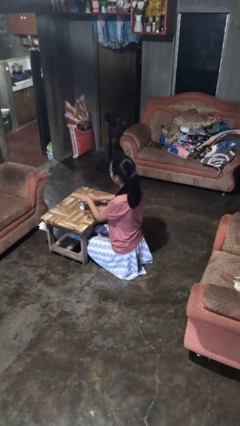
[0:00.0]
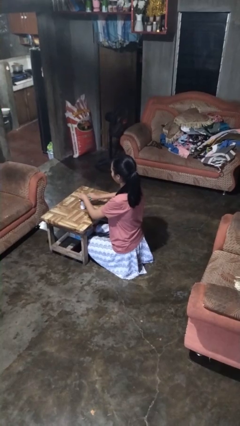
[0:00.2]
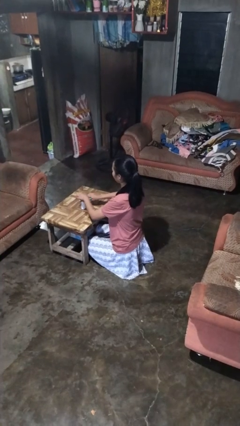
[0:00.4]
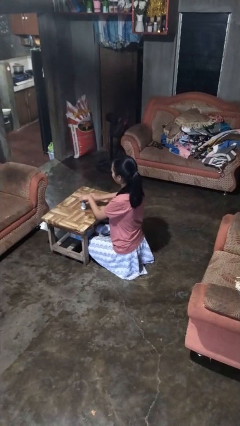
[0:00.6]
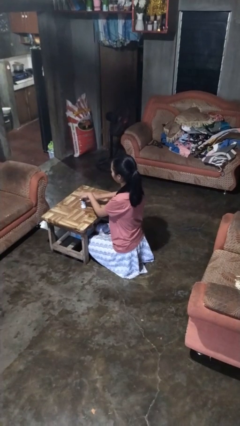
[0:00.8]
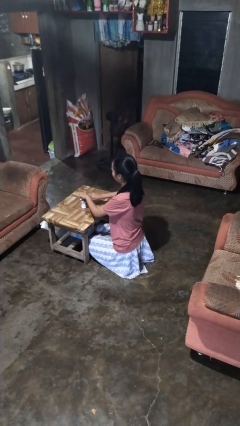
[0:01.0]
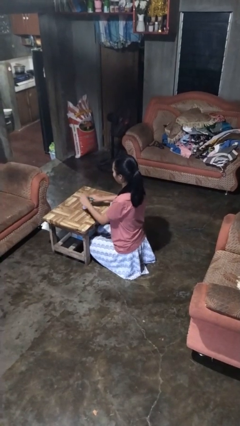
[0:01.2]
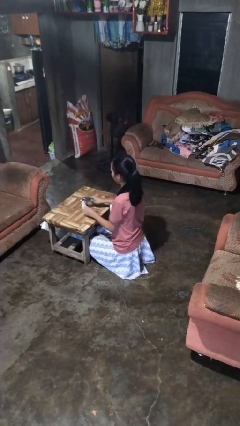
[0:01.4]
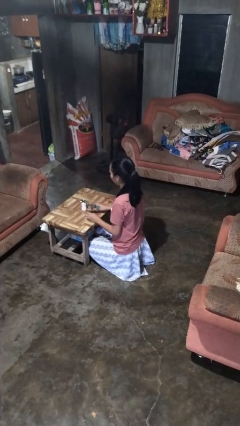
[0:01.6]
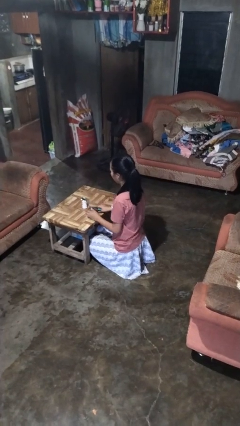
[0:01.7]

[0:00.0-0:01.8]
person opens can with can opener

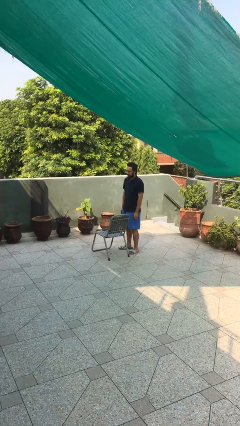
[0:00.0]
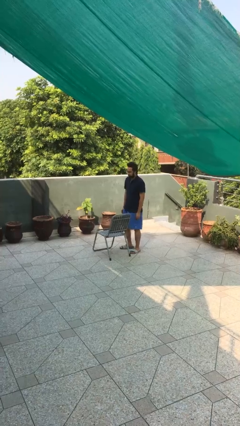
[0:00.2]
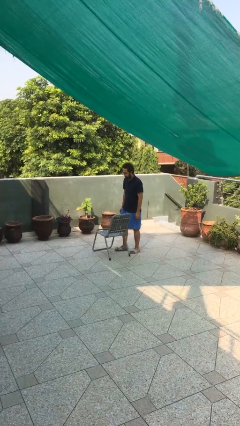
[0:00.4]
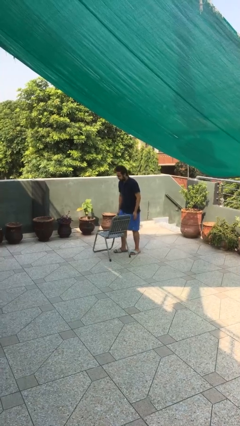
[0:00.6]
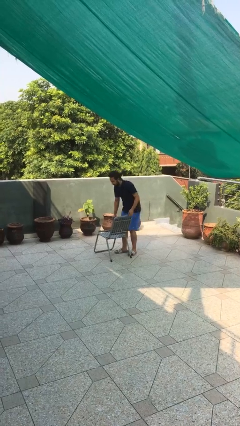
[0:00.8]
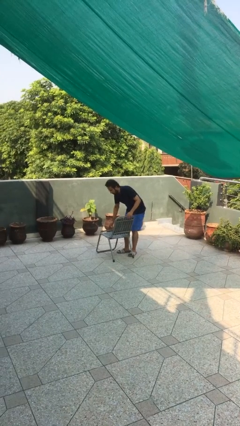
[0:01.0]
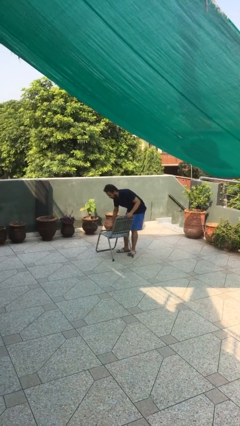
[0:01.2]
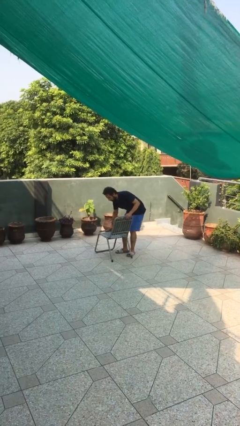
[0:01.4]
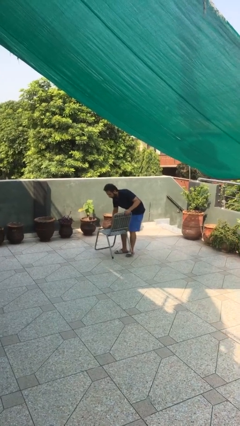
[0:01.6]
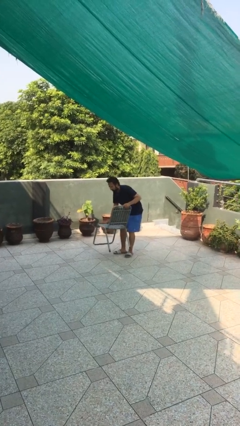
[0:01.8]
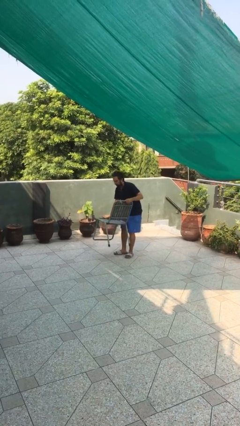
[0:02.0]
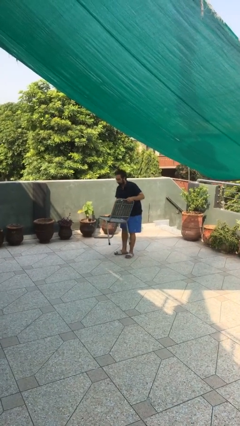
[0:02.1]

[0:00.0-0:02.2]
person picks up object from floor

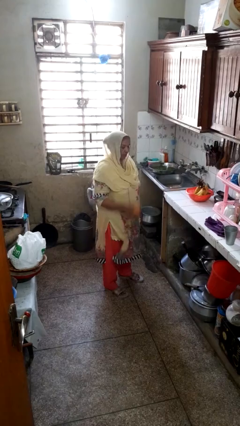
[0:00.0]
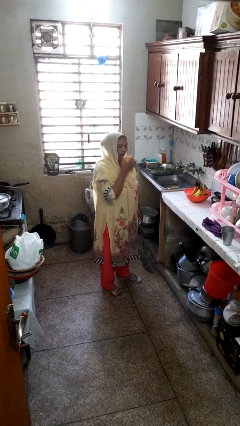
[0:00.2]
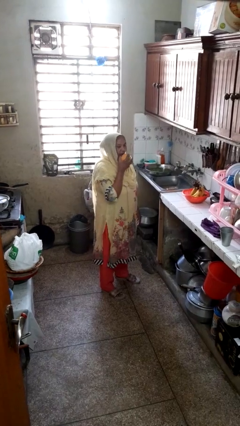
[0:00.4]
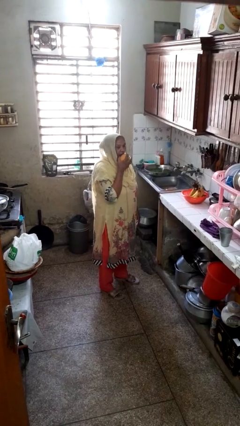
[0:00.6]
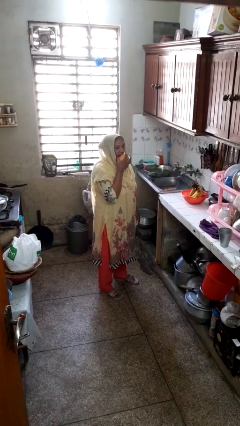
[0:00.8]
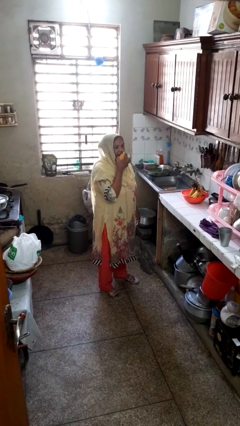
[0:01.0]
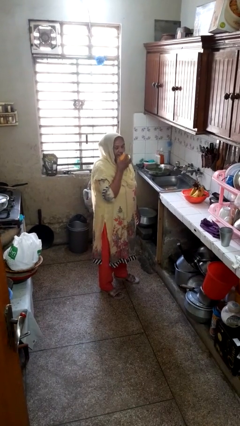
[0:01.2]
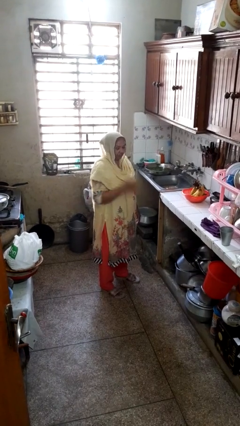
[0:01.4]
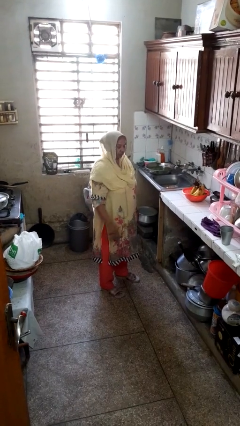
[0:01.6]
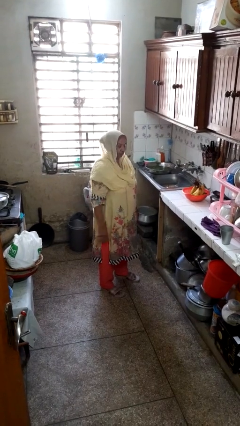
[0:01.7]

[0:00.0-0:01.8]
person eats apple

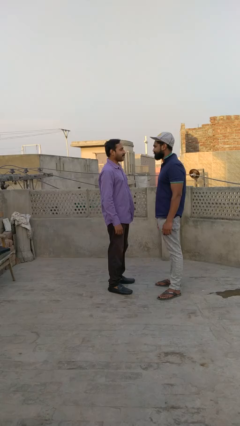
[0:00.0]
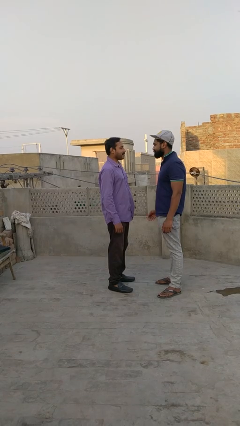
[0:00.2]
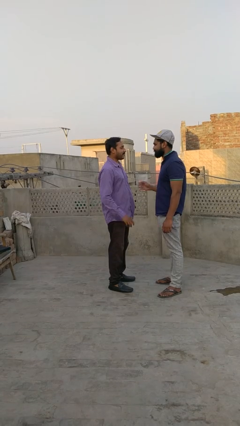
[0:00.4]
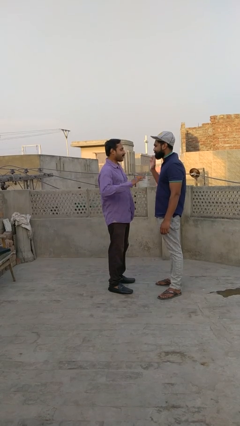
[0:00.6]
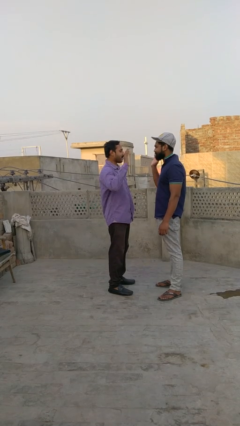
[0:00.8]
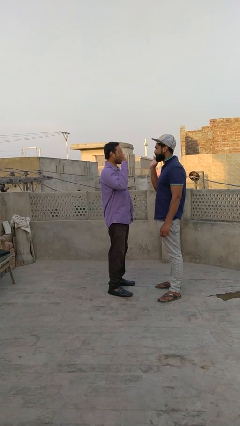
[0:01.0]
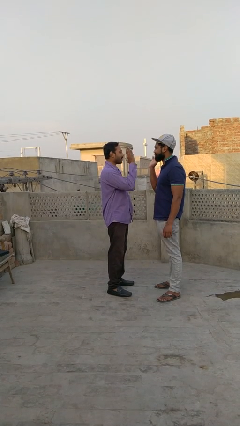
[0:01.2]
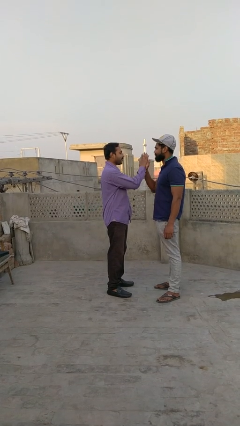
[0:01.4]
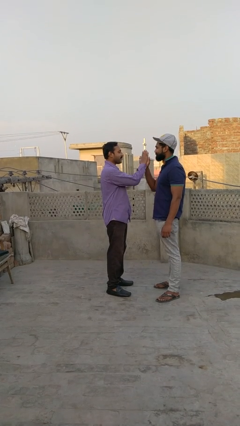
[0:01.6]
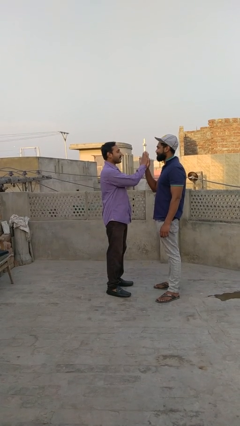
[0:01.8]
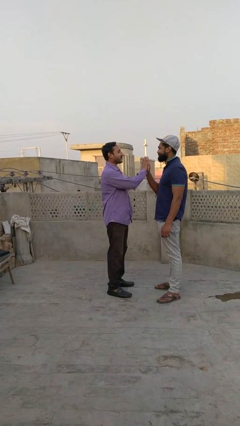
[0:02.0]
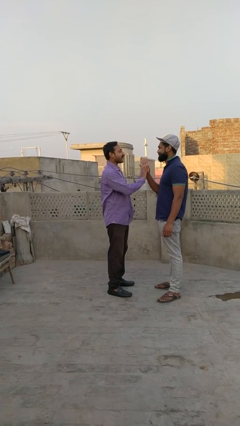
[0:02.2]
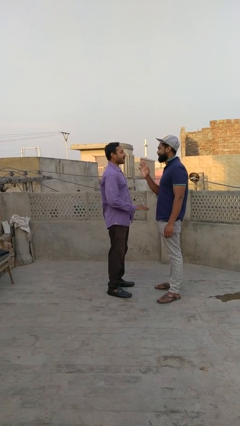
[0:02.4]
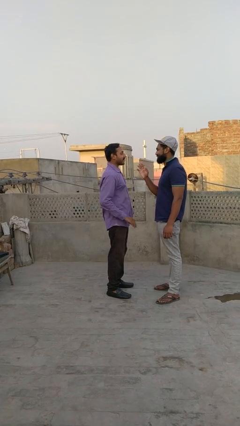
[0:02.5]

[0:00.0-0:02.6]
person highfives hand

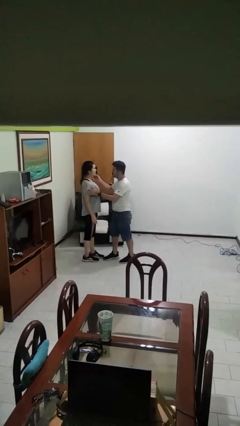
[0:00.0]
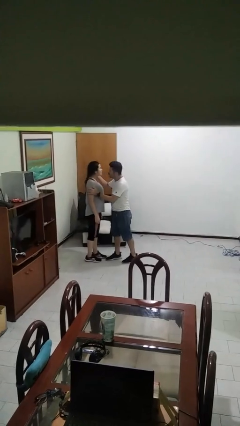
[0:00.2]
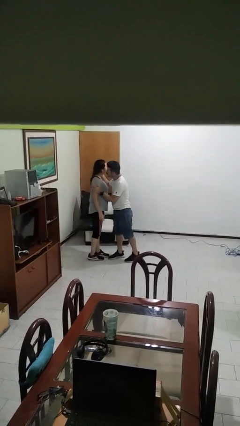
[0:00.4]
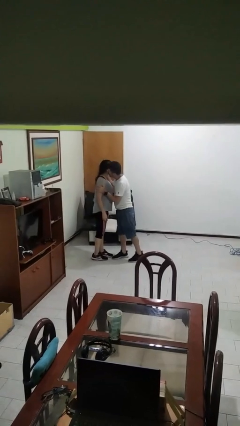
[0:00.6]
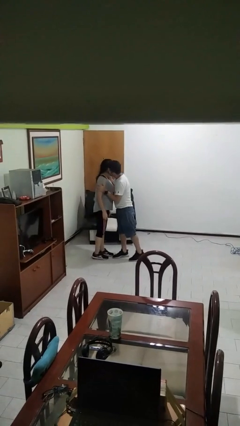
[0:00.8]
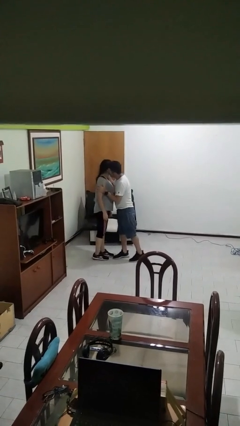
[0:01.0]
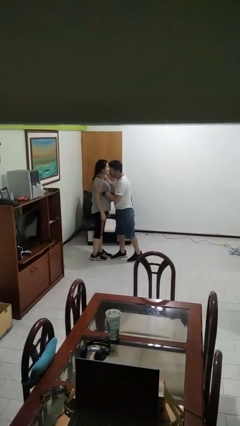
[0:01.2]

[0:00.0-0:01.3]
person kisses cheek of person

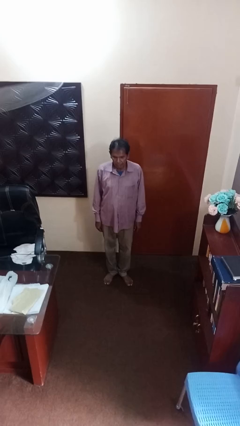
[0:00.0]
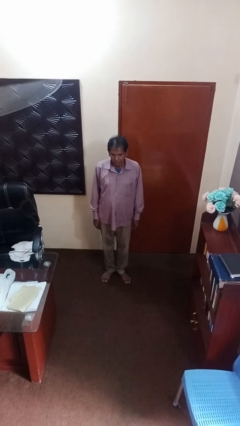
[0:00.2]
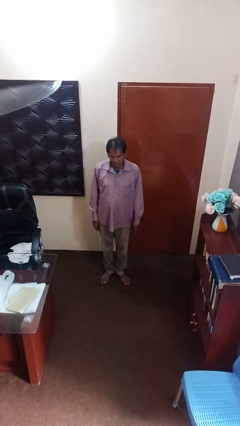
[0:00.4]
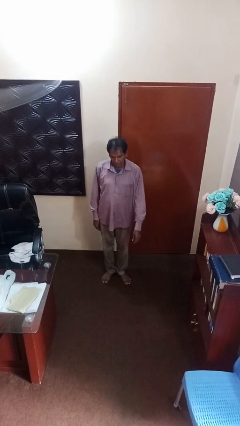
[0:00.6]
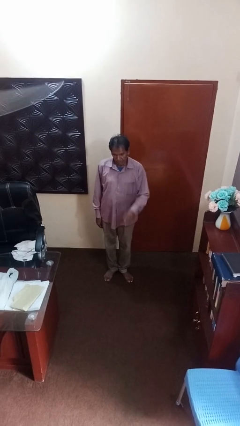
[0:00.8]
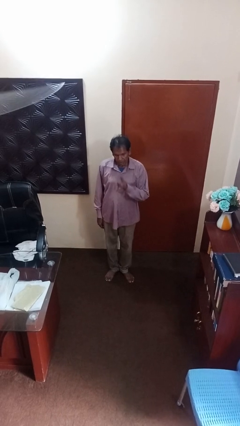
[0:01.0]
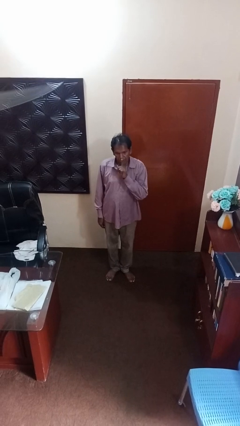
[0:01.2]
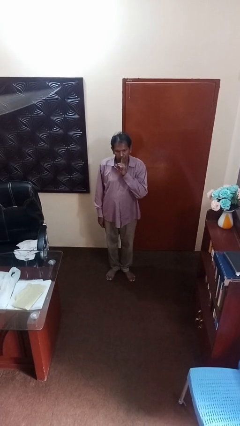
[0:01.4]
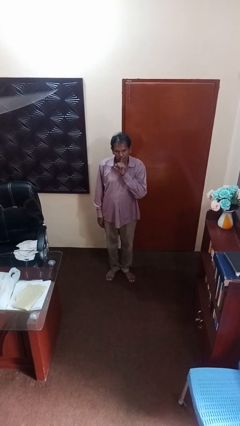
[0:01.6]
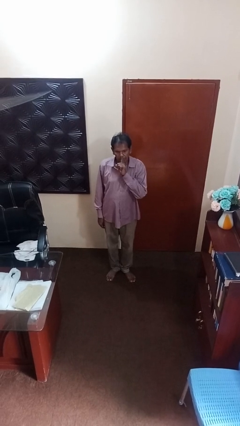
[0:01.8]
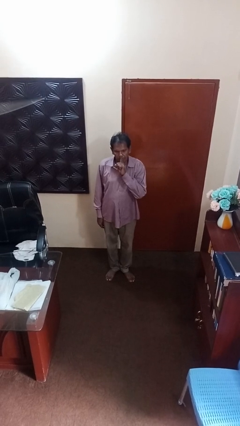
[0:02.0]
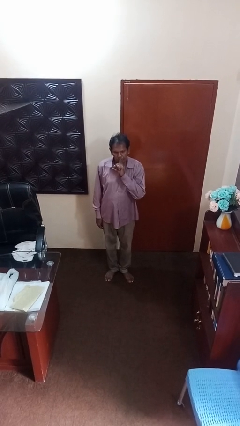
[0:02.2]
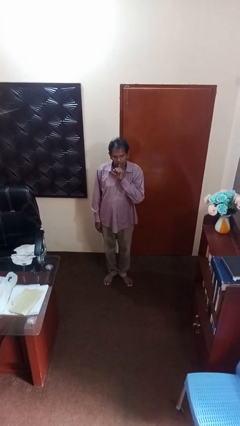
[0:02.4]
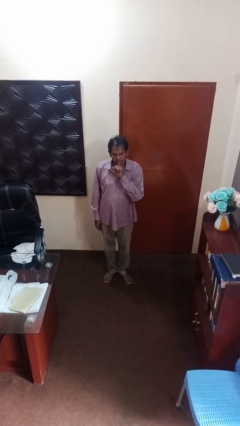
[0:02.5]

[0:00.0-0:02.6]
person gestures blow kiss

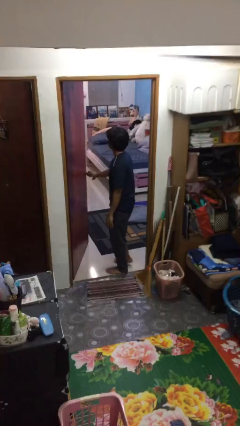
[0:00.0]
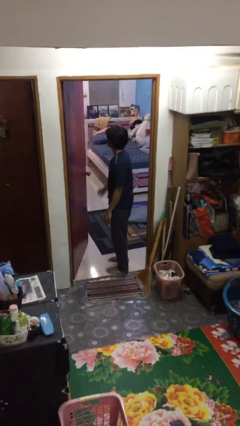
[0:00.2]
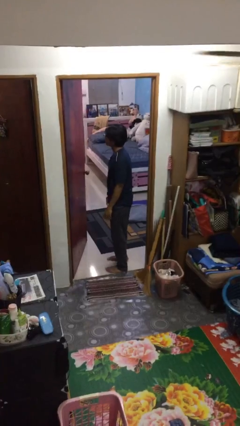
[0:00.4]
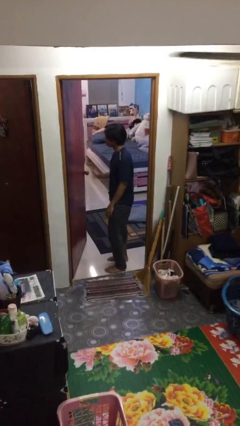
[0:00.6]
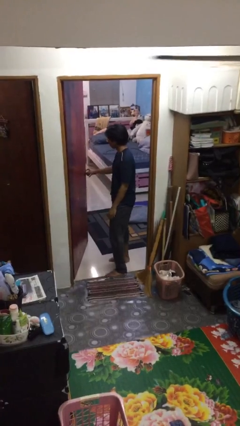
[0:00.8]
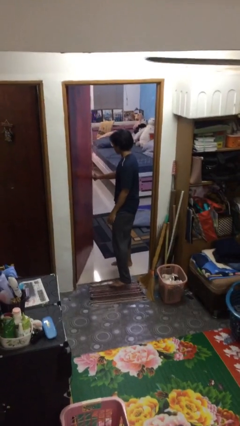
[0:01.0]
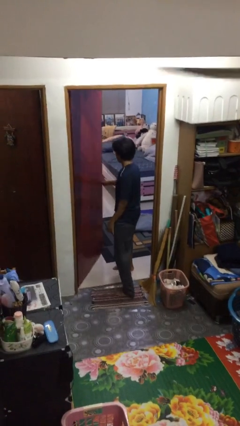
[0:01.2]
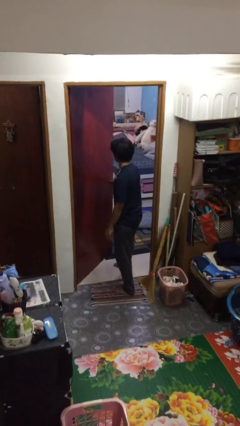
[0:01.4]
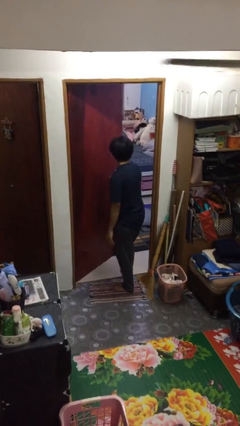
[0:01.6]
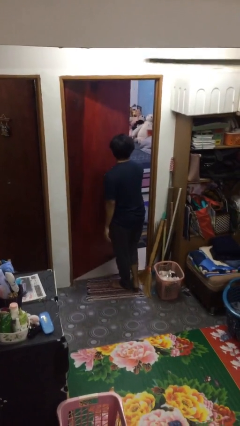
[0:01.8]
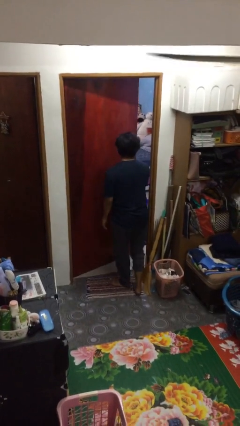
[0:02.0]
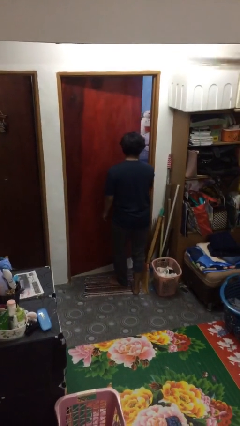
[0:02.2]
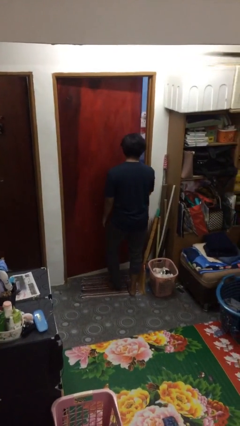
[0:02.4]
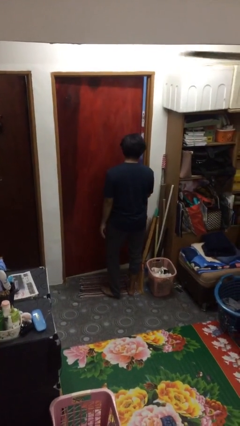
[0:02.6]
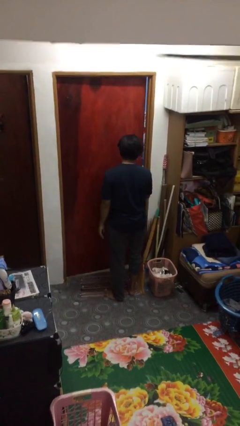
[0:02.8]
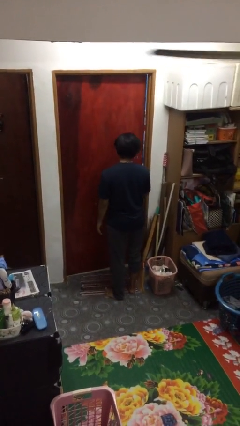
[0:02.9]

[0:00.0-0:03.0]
person closes facility door

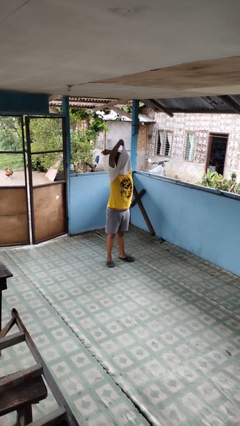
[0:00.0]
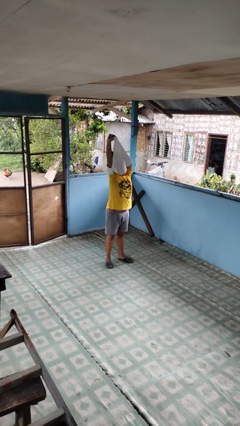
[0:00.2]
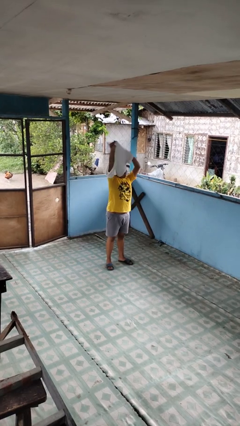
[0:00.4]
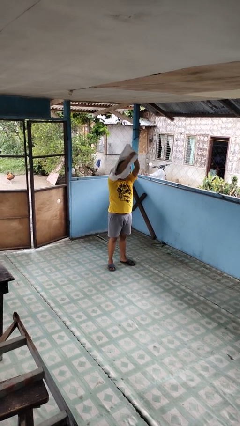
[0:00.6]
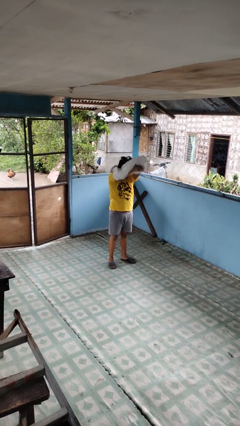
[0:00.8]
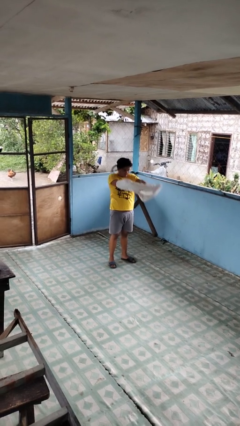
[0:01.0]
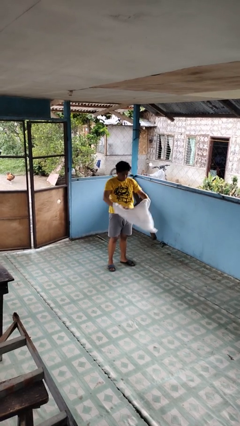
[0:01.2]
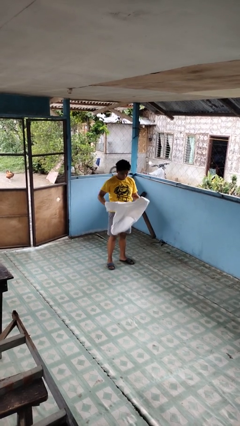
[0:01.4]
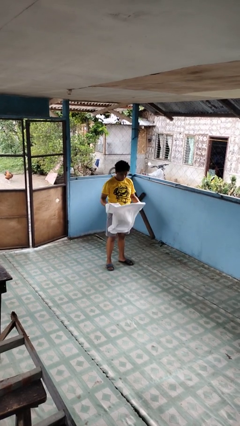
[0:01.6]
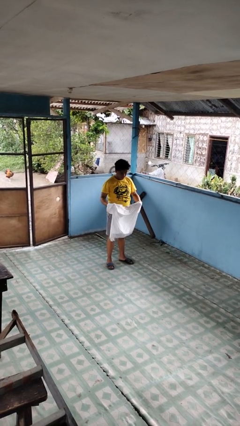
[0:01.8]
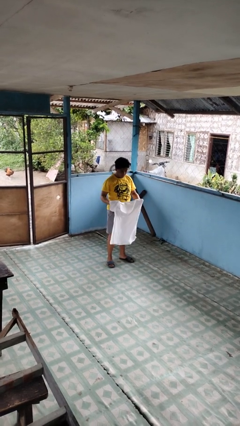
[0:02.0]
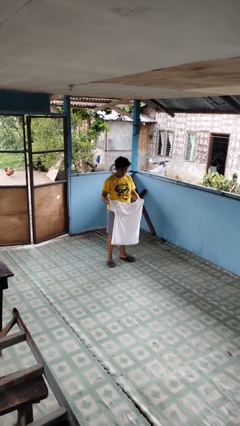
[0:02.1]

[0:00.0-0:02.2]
person takes off shirt
